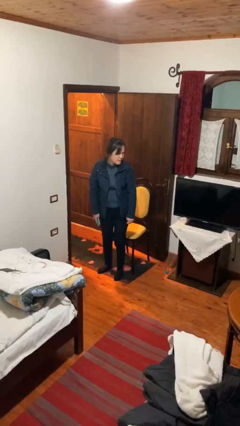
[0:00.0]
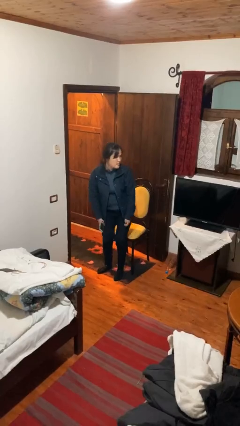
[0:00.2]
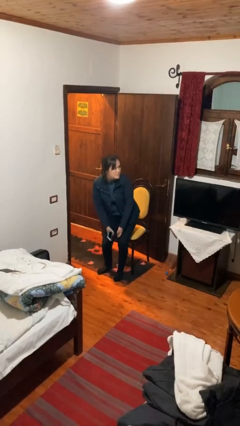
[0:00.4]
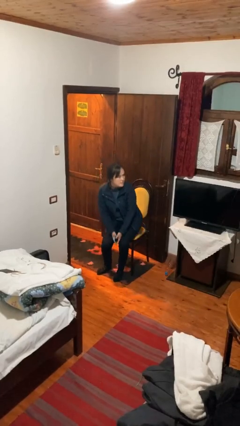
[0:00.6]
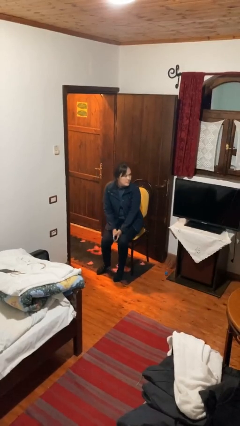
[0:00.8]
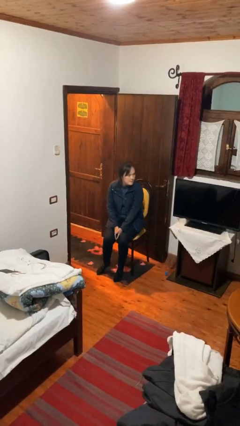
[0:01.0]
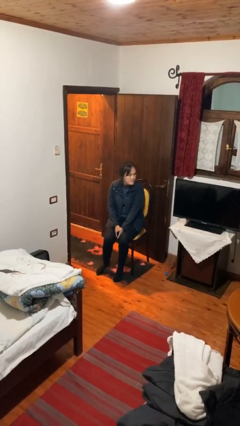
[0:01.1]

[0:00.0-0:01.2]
person sits down

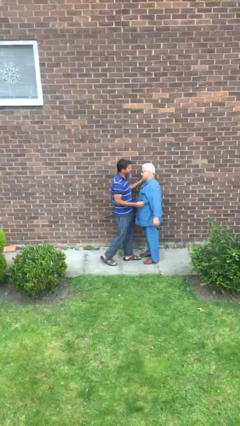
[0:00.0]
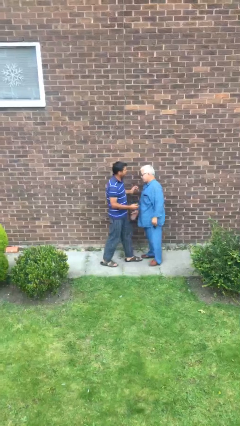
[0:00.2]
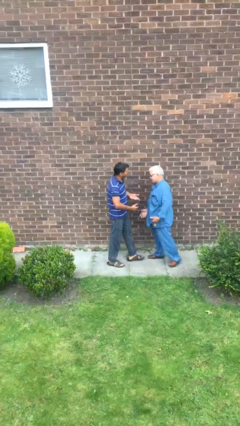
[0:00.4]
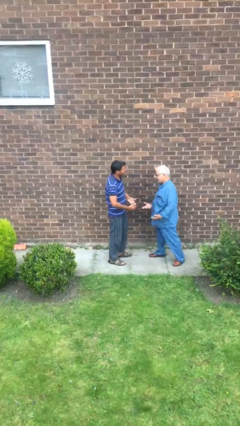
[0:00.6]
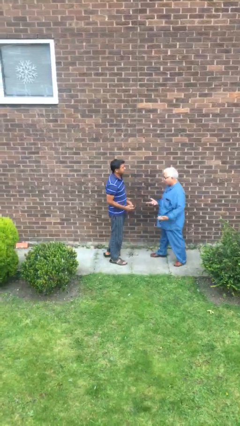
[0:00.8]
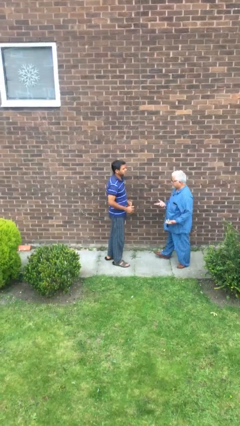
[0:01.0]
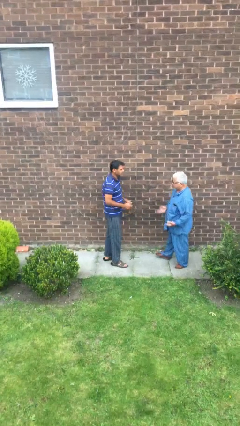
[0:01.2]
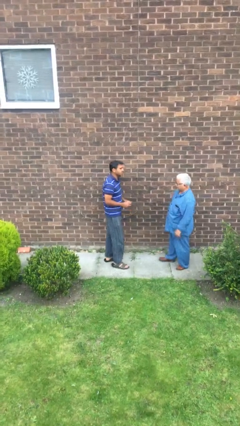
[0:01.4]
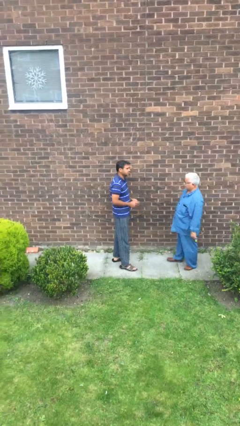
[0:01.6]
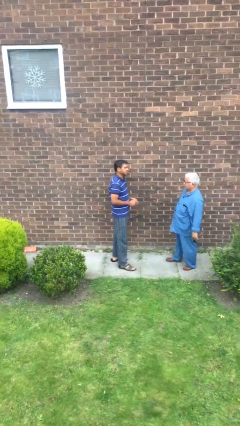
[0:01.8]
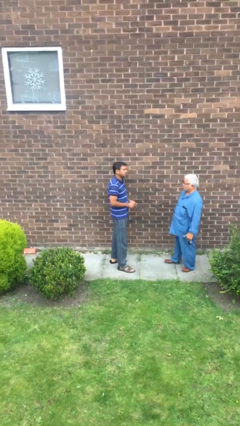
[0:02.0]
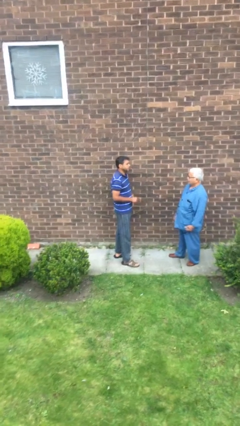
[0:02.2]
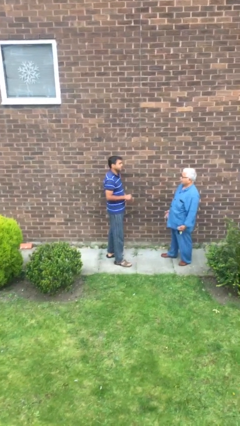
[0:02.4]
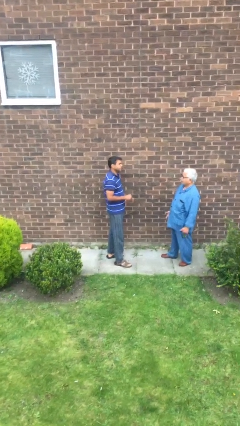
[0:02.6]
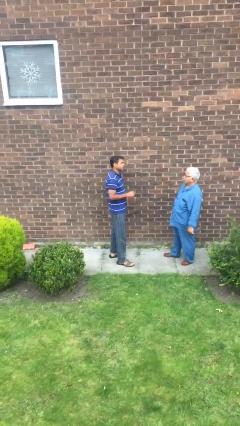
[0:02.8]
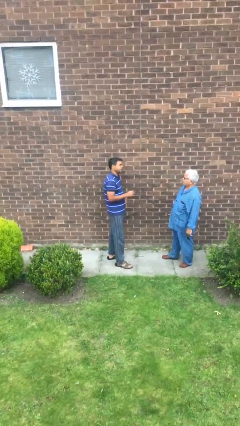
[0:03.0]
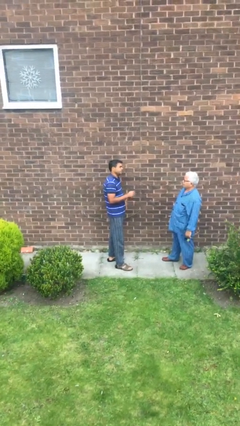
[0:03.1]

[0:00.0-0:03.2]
person talks to person

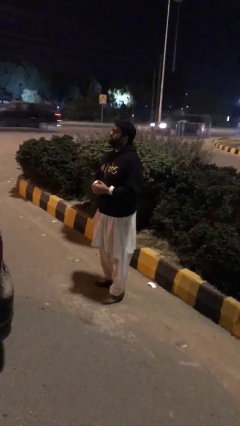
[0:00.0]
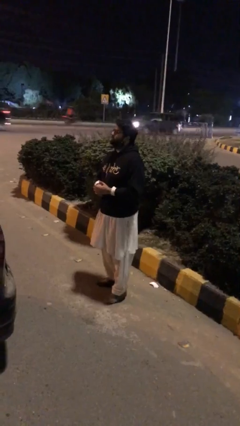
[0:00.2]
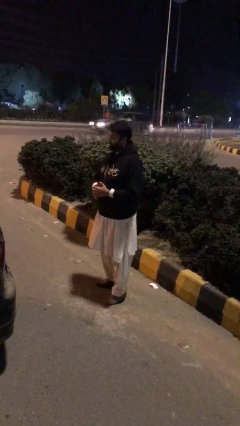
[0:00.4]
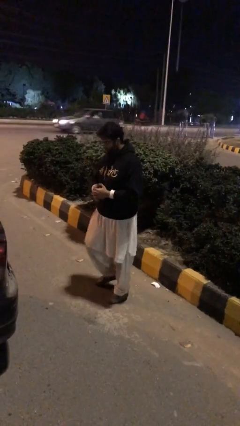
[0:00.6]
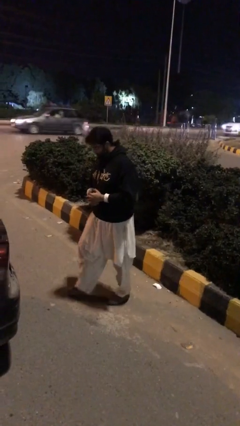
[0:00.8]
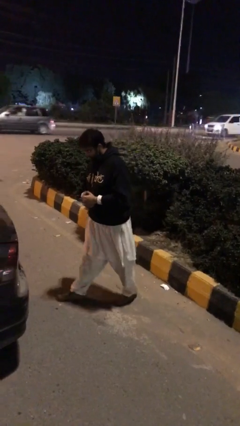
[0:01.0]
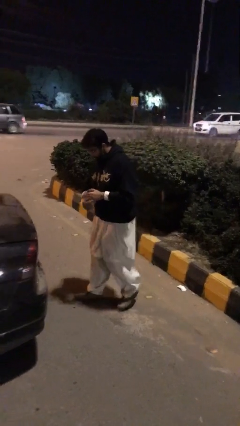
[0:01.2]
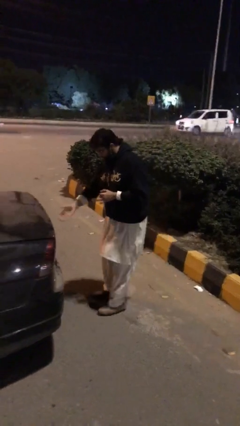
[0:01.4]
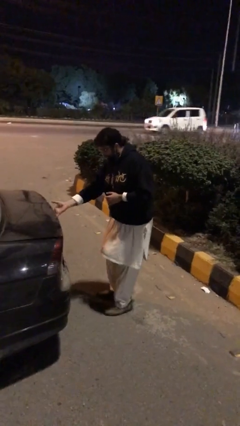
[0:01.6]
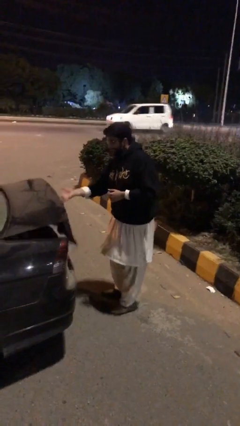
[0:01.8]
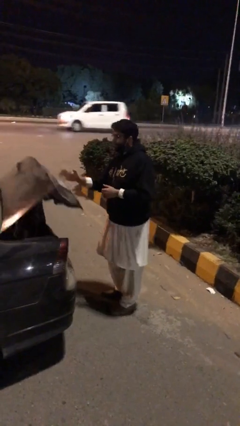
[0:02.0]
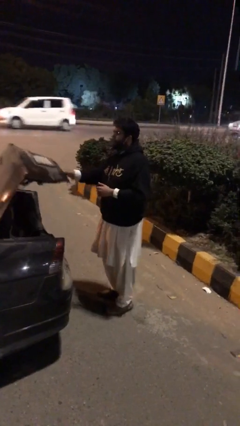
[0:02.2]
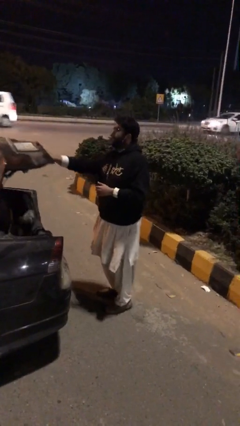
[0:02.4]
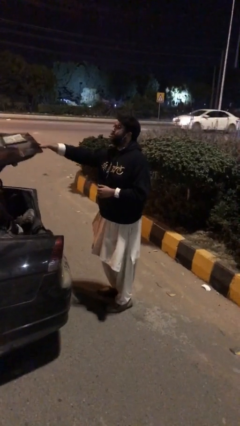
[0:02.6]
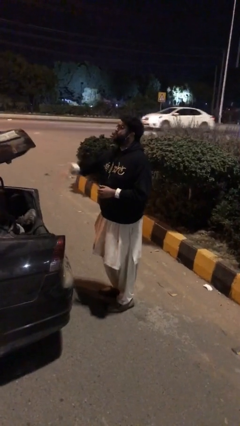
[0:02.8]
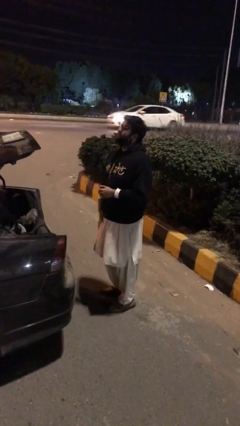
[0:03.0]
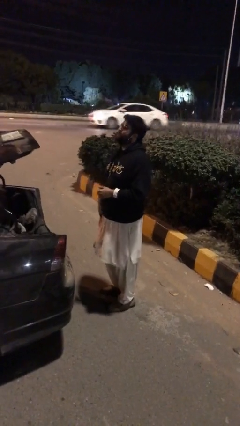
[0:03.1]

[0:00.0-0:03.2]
person opens car trunk

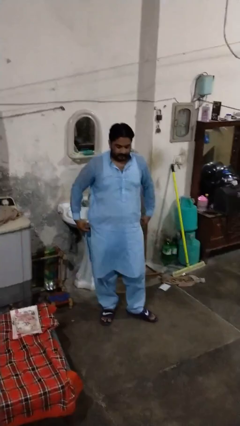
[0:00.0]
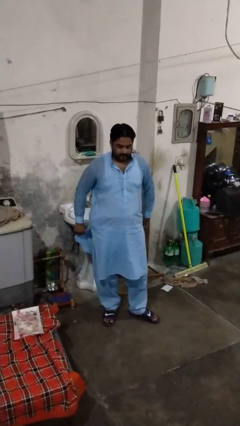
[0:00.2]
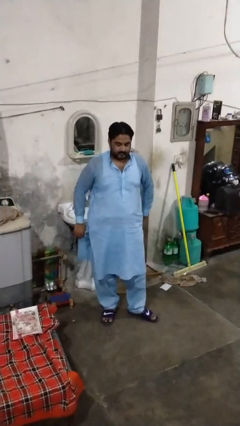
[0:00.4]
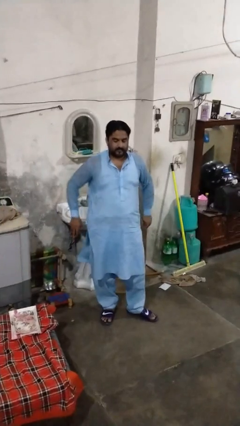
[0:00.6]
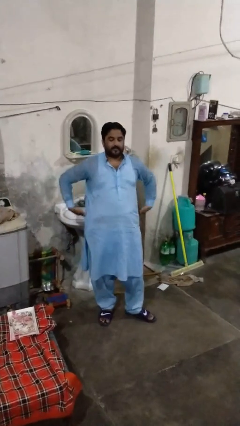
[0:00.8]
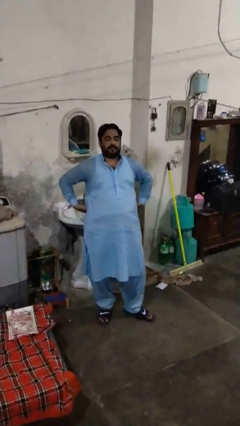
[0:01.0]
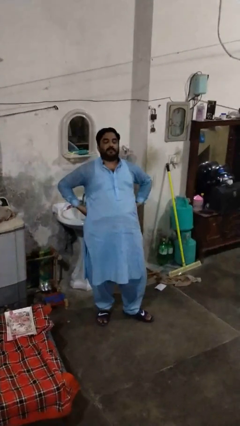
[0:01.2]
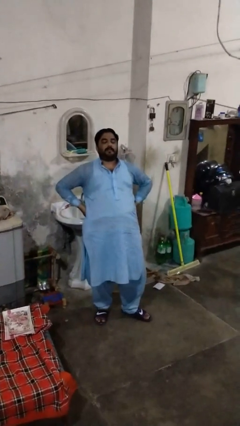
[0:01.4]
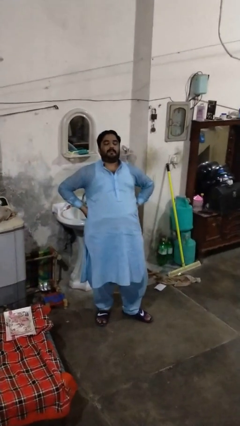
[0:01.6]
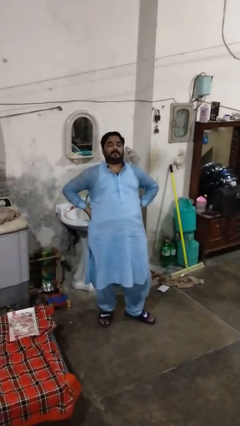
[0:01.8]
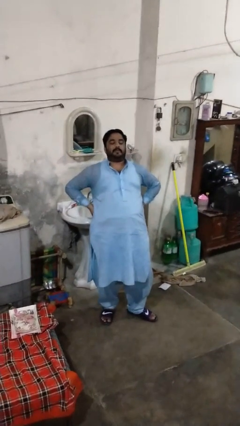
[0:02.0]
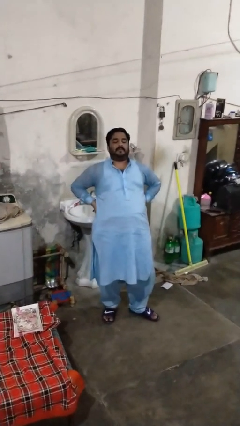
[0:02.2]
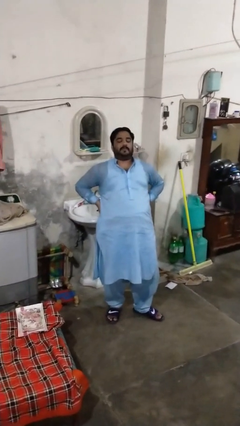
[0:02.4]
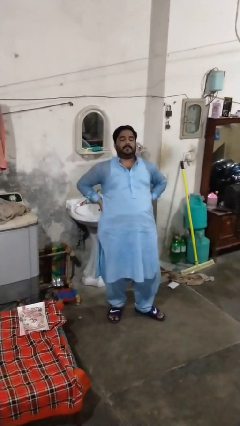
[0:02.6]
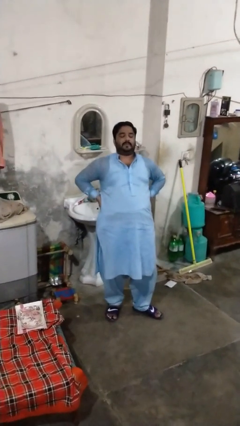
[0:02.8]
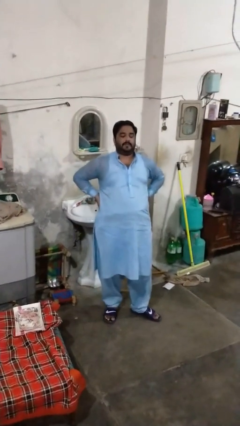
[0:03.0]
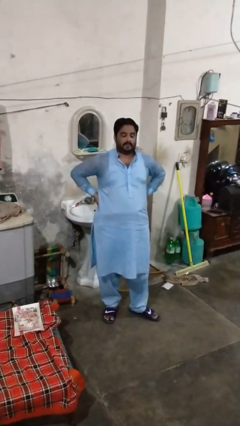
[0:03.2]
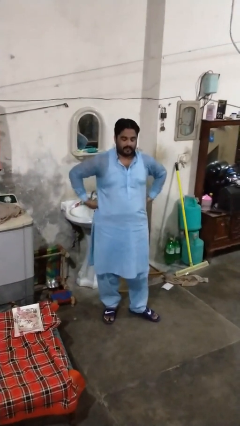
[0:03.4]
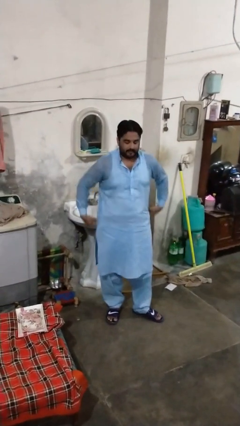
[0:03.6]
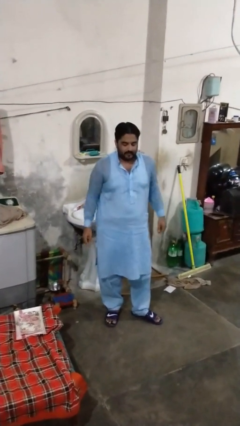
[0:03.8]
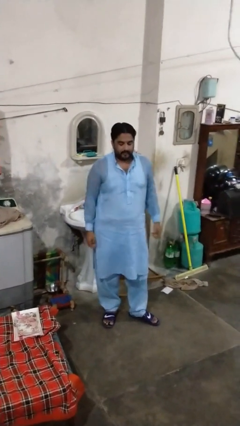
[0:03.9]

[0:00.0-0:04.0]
person stretches back

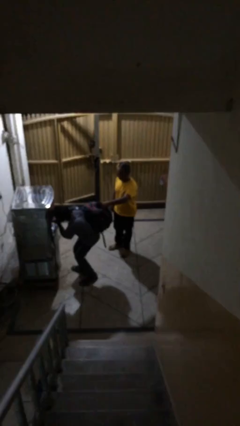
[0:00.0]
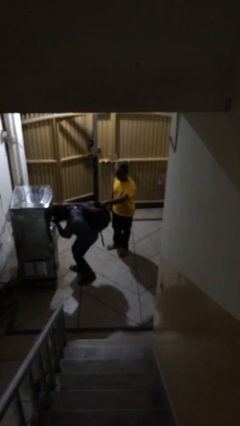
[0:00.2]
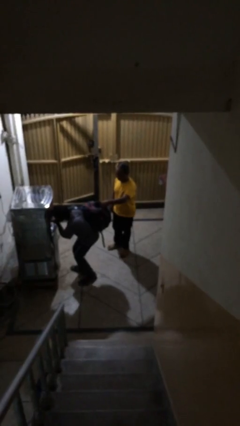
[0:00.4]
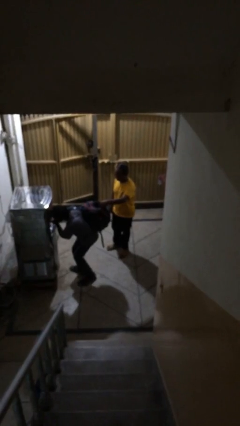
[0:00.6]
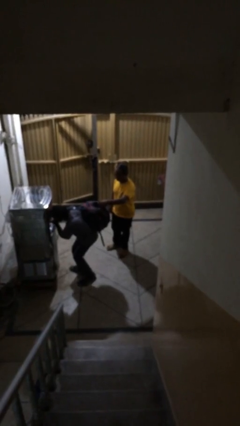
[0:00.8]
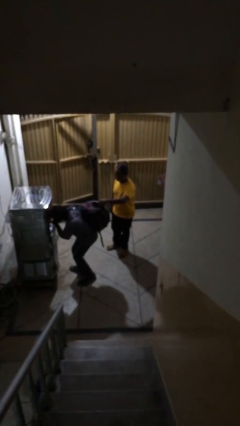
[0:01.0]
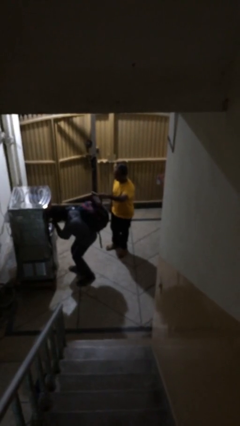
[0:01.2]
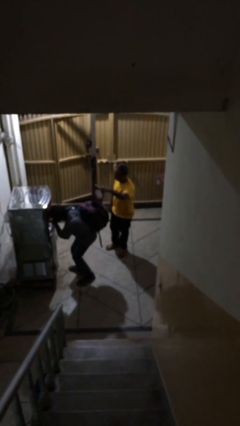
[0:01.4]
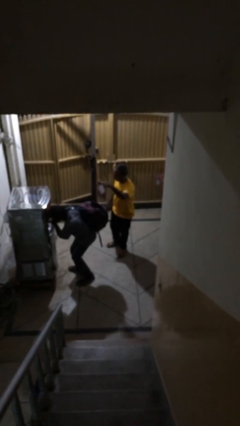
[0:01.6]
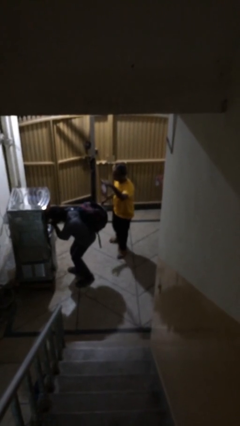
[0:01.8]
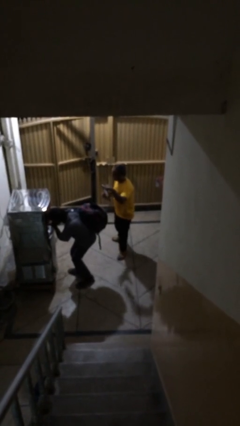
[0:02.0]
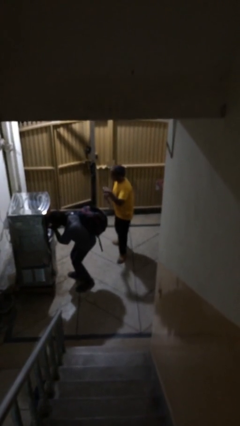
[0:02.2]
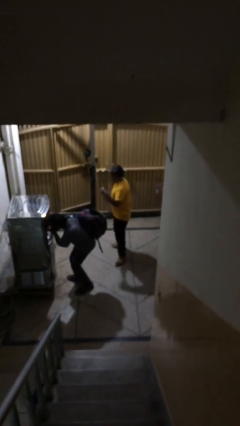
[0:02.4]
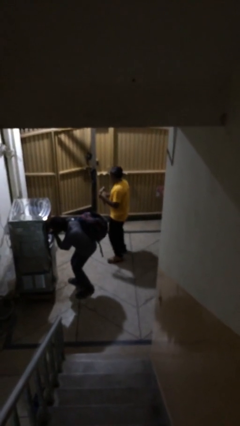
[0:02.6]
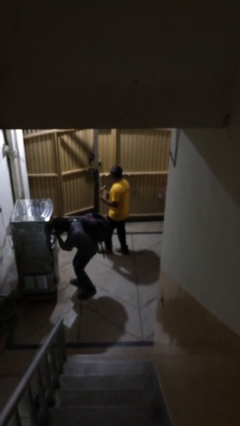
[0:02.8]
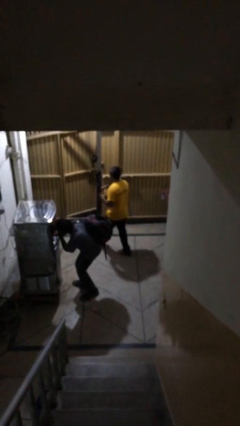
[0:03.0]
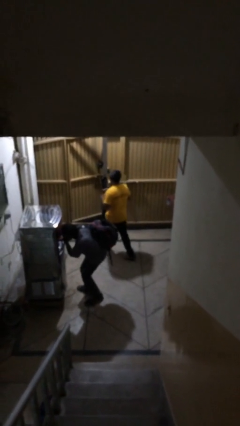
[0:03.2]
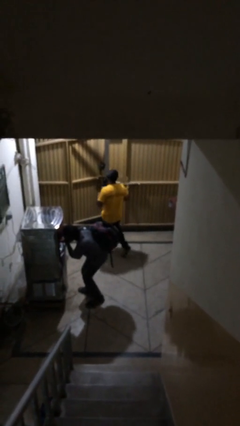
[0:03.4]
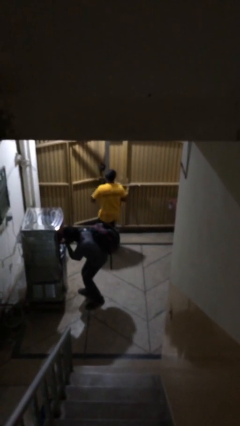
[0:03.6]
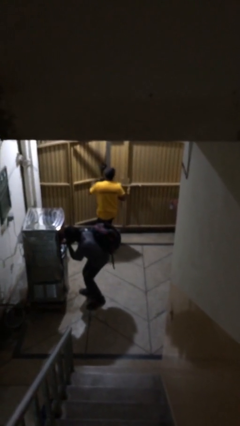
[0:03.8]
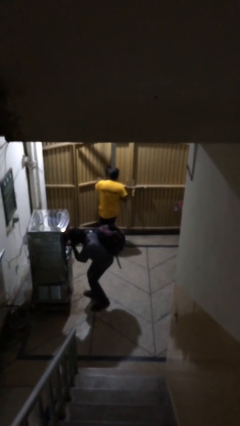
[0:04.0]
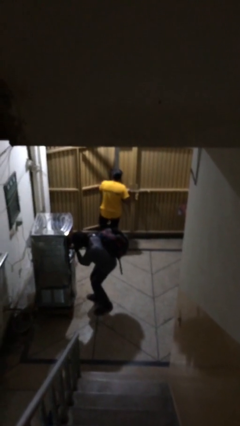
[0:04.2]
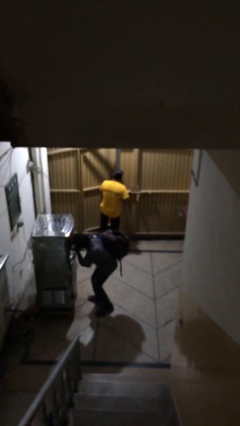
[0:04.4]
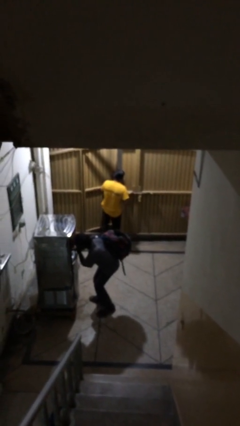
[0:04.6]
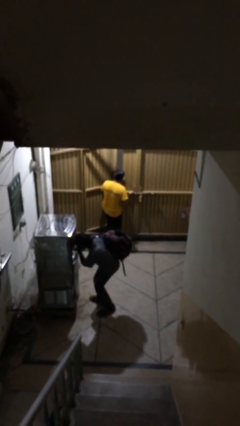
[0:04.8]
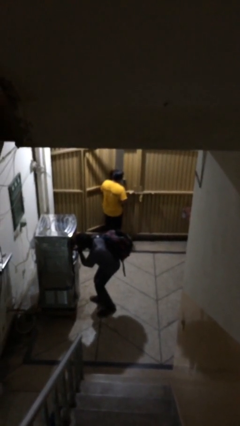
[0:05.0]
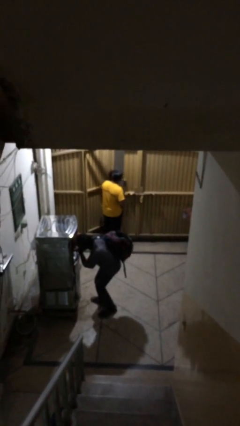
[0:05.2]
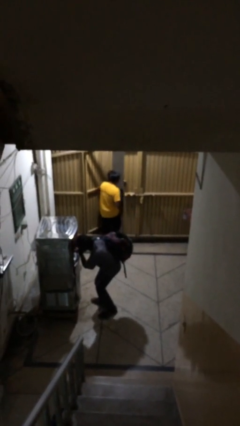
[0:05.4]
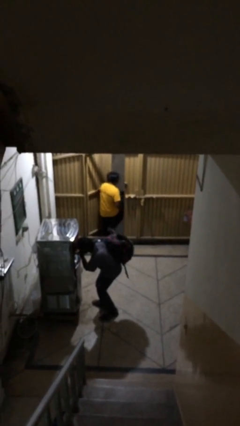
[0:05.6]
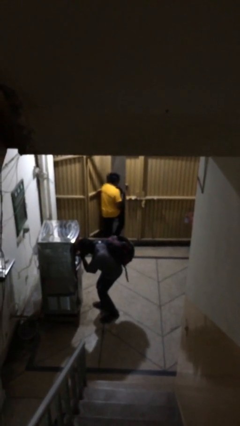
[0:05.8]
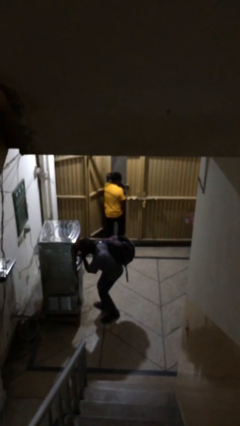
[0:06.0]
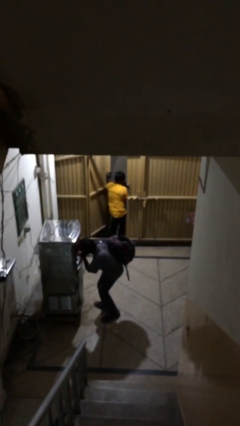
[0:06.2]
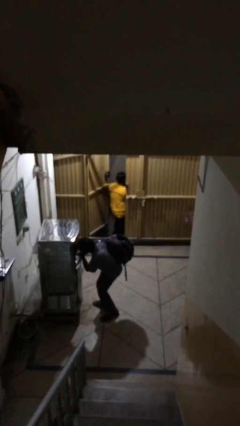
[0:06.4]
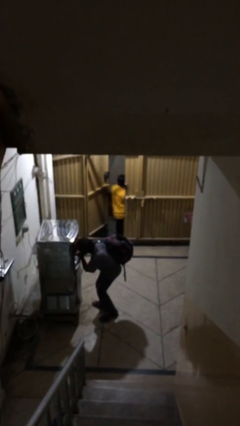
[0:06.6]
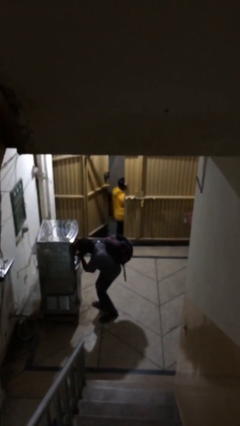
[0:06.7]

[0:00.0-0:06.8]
person steals object from person
